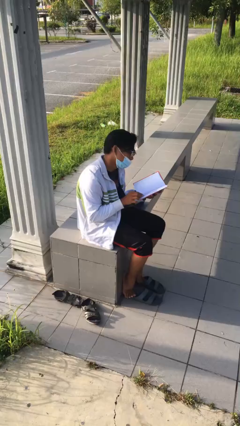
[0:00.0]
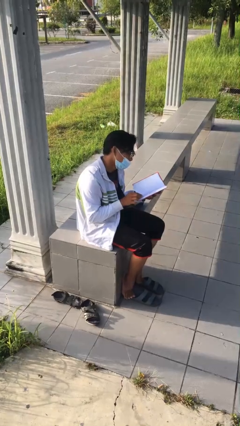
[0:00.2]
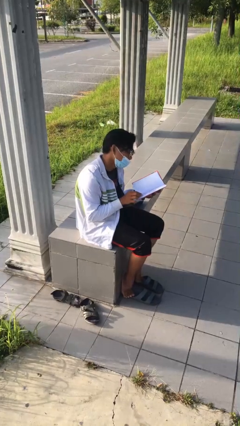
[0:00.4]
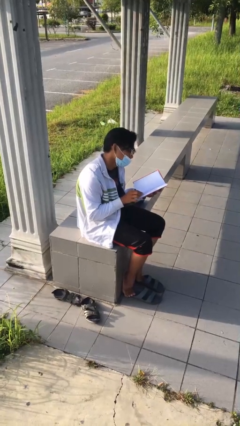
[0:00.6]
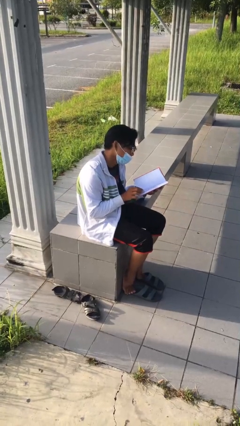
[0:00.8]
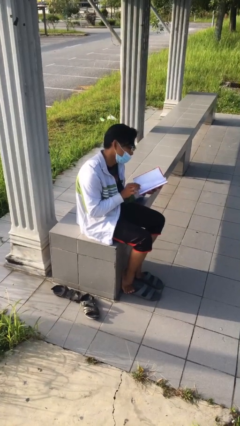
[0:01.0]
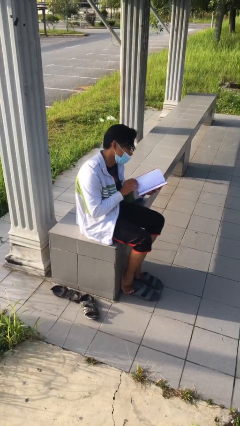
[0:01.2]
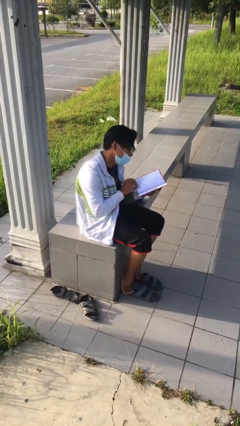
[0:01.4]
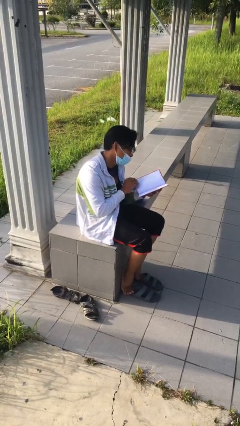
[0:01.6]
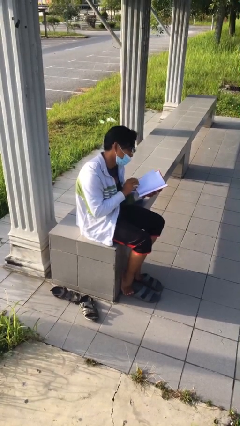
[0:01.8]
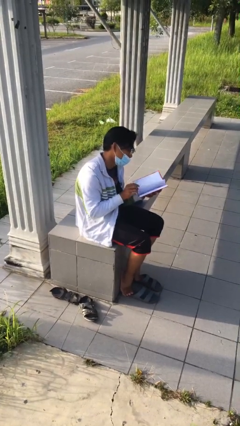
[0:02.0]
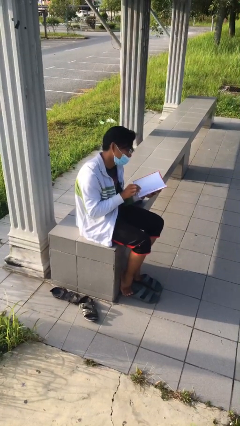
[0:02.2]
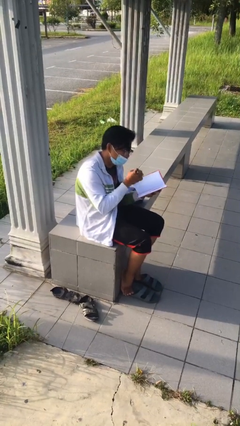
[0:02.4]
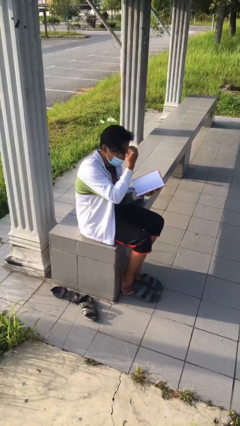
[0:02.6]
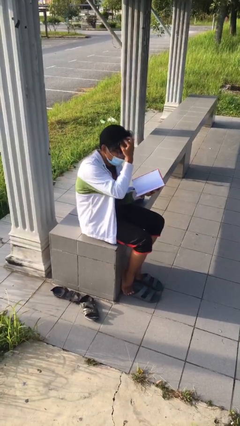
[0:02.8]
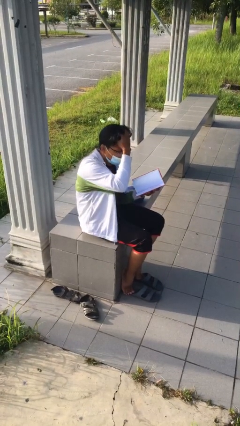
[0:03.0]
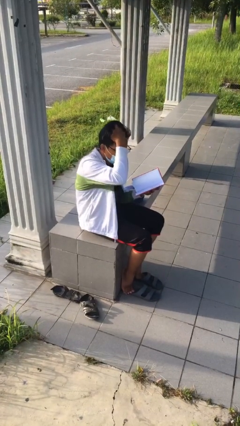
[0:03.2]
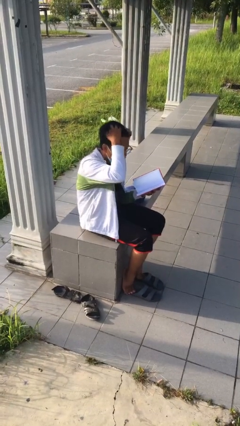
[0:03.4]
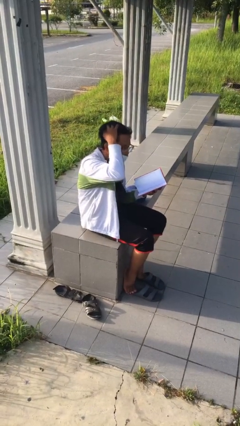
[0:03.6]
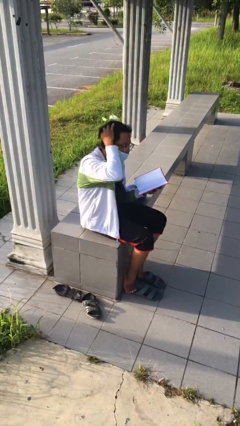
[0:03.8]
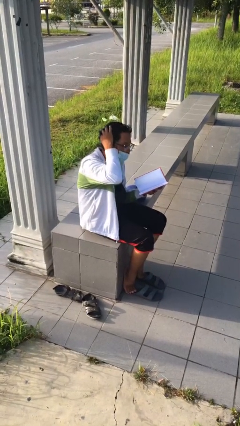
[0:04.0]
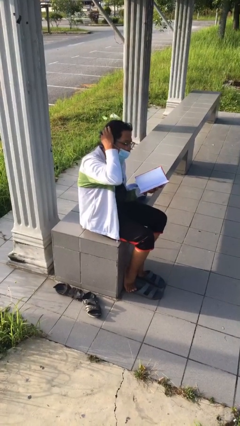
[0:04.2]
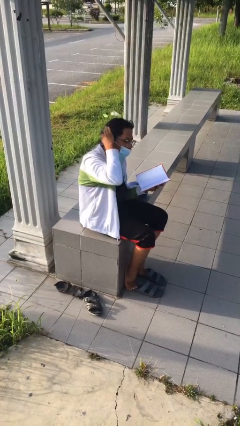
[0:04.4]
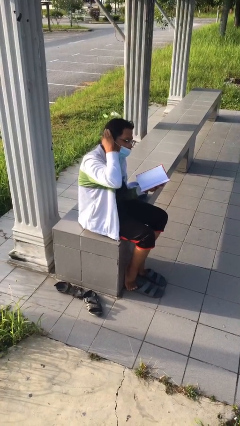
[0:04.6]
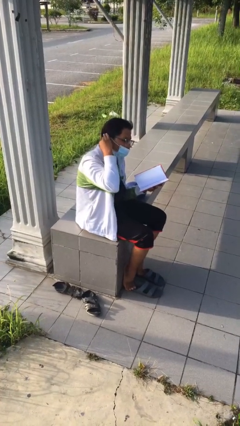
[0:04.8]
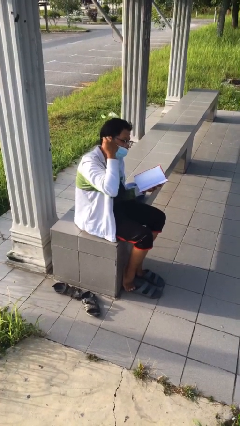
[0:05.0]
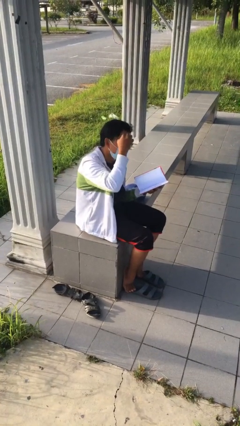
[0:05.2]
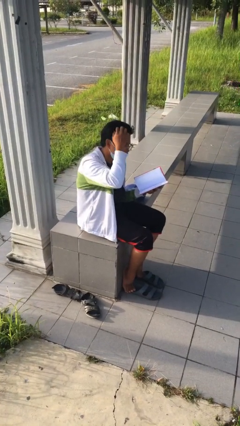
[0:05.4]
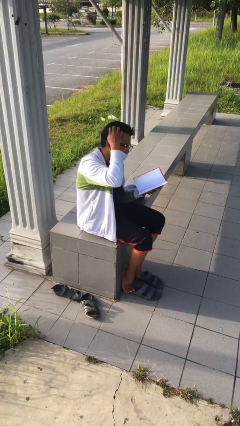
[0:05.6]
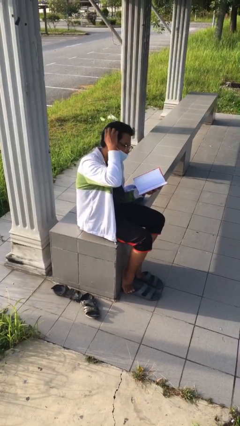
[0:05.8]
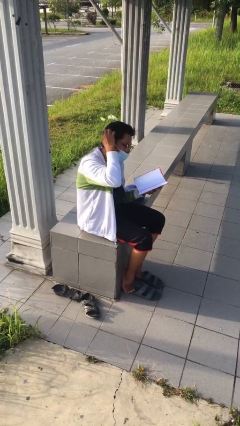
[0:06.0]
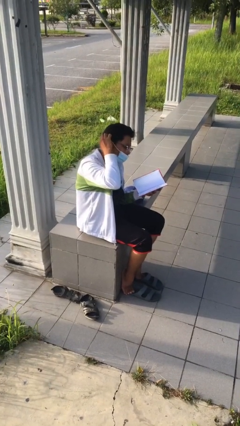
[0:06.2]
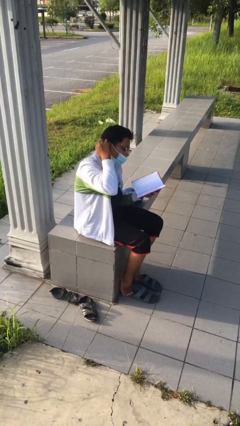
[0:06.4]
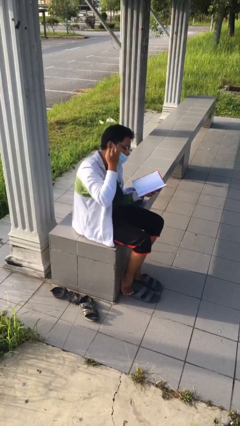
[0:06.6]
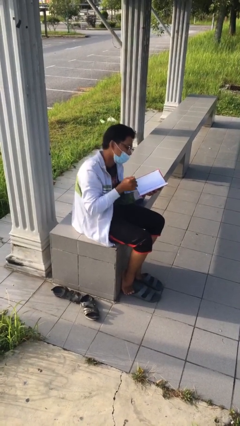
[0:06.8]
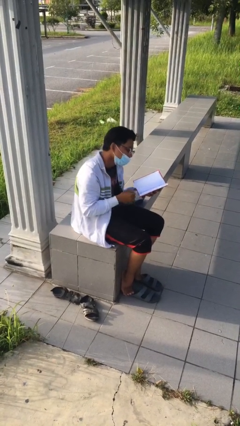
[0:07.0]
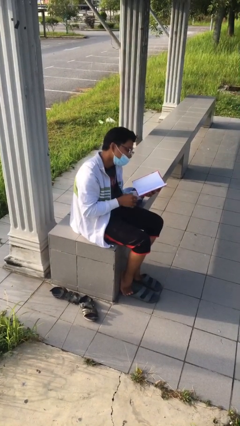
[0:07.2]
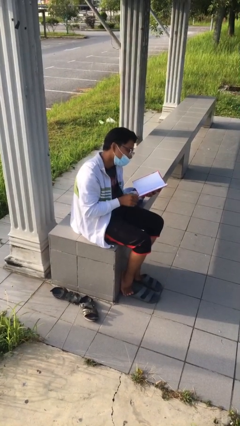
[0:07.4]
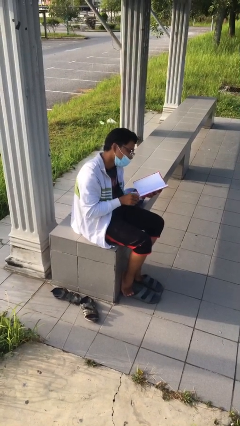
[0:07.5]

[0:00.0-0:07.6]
person reads document

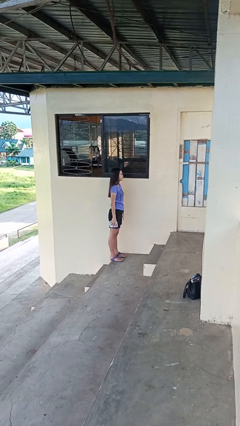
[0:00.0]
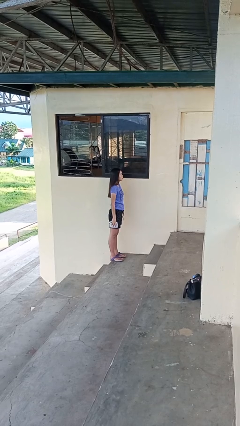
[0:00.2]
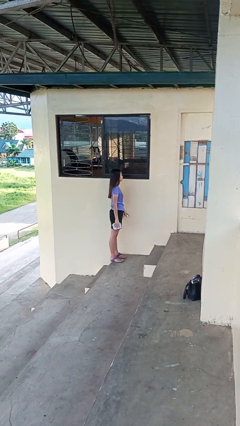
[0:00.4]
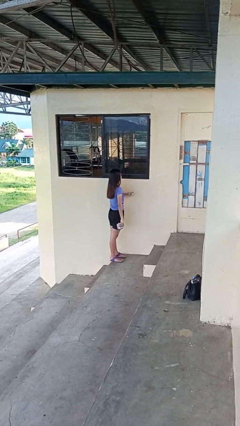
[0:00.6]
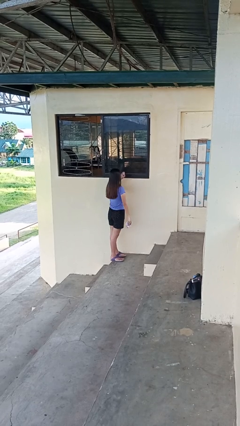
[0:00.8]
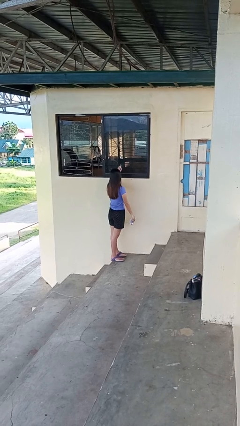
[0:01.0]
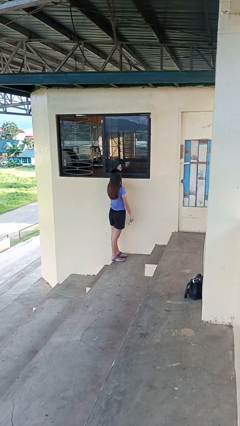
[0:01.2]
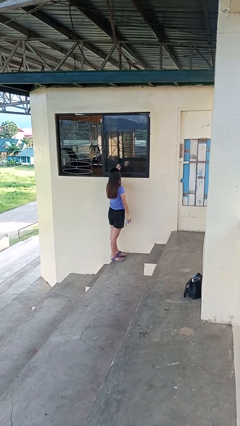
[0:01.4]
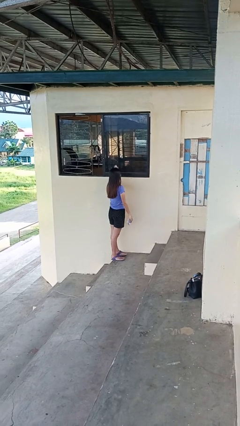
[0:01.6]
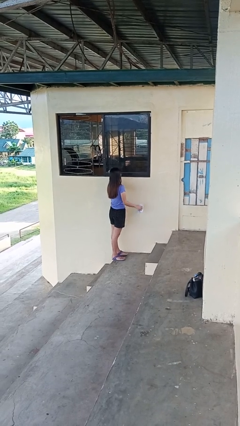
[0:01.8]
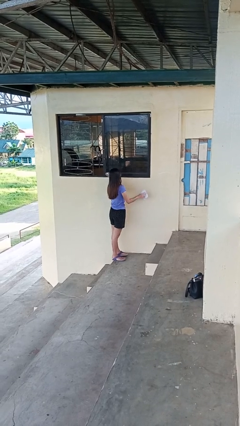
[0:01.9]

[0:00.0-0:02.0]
person sprays from bottle

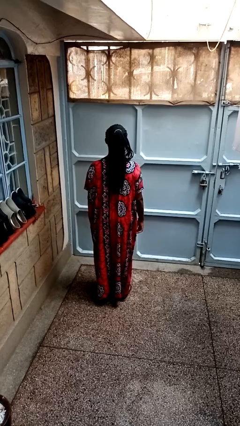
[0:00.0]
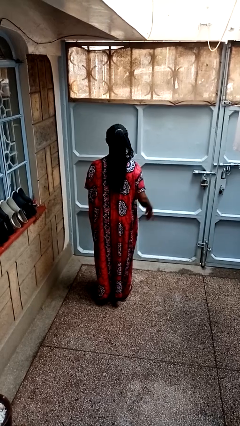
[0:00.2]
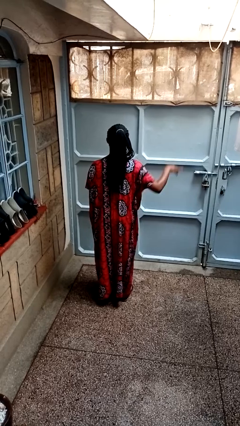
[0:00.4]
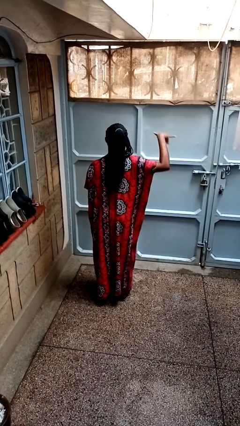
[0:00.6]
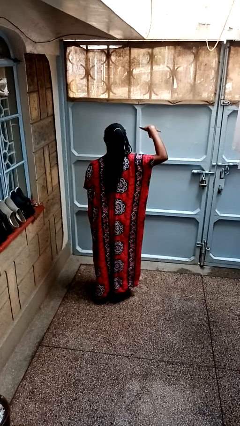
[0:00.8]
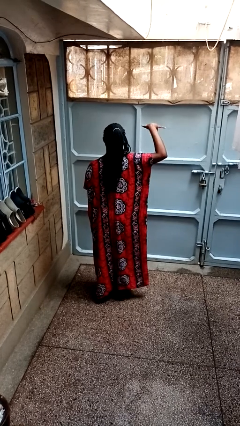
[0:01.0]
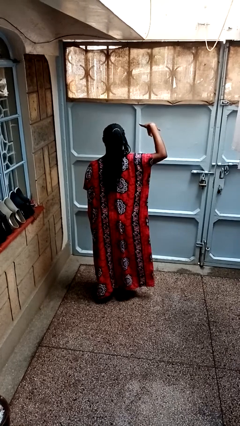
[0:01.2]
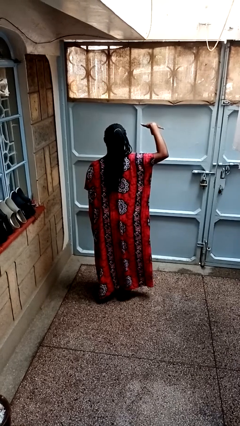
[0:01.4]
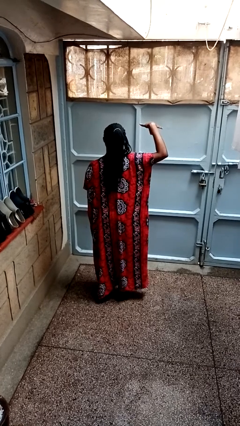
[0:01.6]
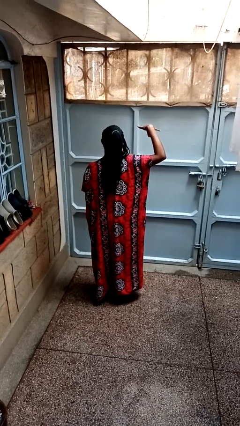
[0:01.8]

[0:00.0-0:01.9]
person gestures hang loose

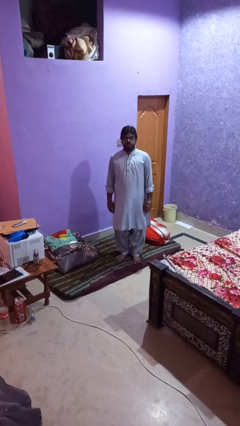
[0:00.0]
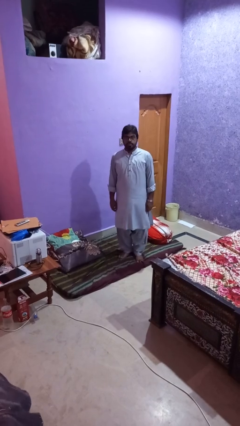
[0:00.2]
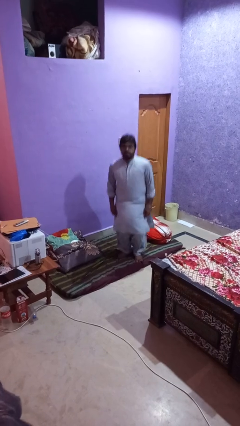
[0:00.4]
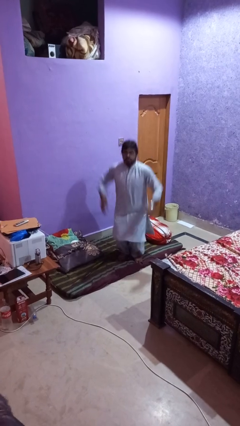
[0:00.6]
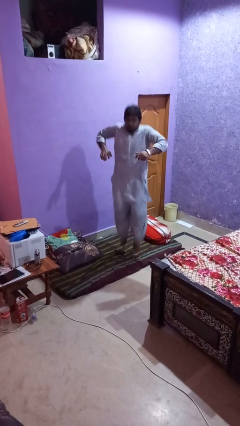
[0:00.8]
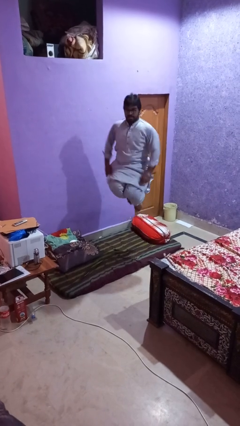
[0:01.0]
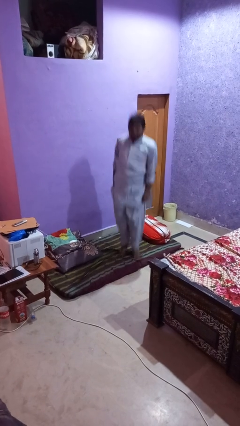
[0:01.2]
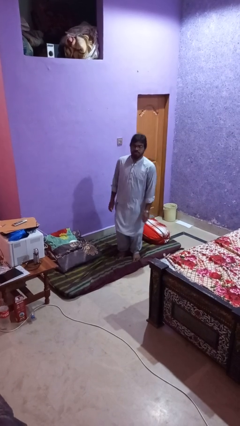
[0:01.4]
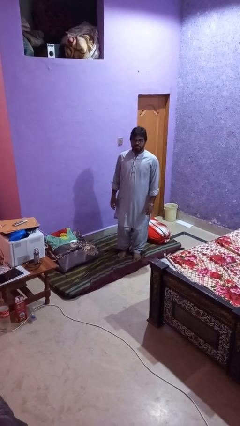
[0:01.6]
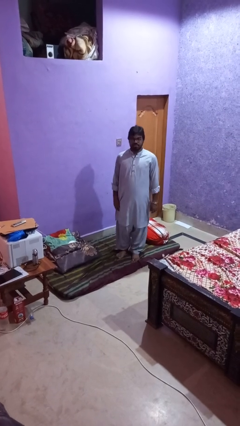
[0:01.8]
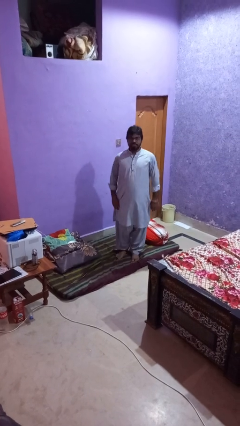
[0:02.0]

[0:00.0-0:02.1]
person jumps

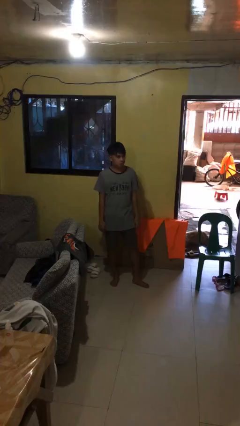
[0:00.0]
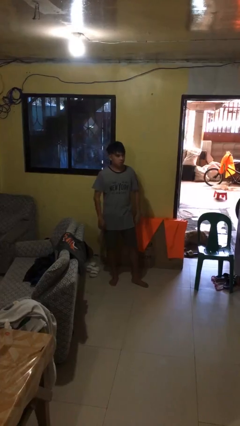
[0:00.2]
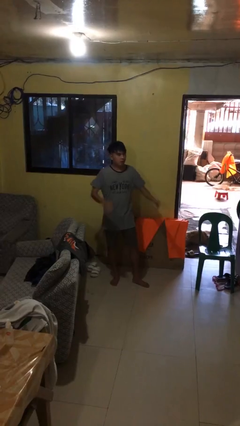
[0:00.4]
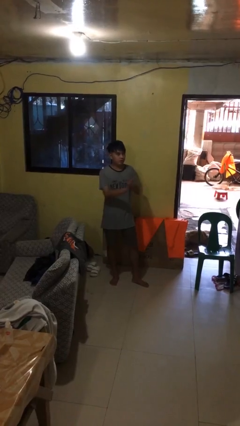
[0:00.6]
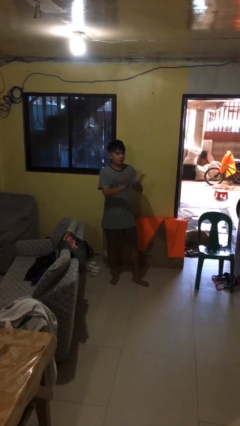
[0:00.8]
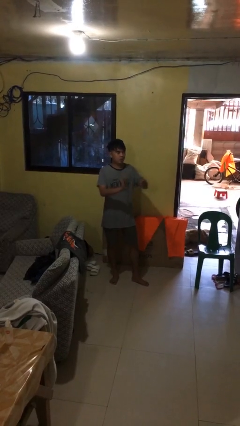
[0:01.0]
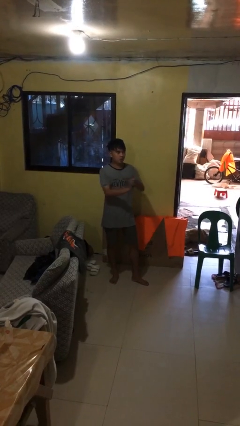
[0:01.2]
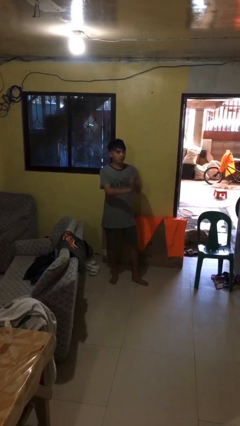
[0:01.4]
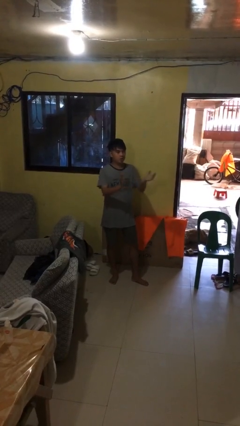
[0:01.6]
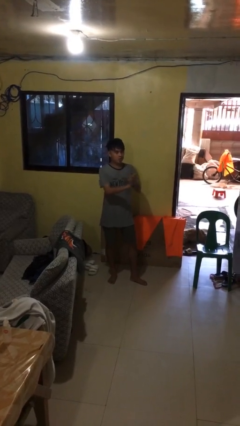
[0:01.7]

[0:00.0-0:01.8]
person claps hands

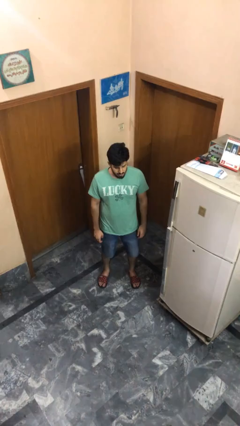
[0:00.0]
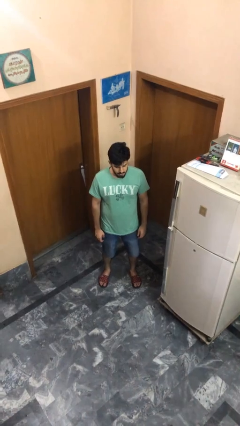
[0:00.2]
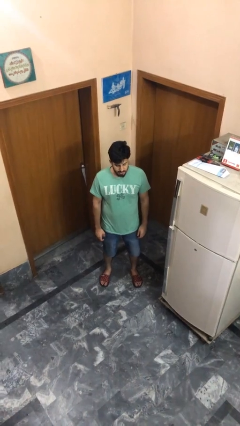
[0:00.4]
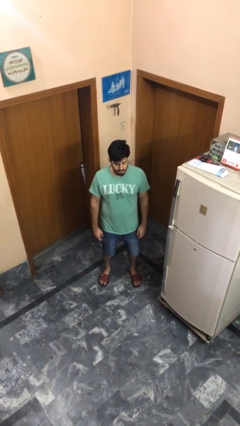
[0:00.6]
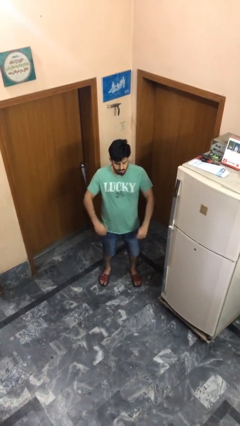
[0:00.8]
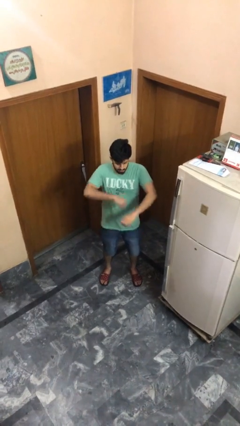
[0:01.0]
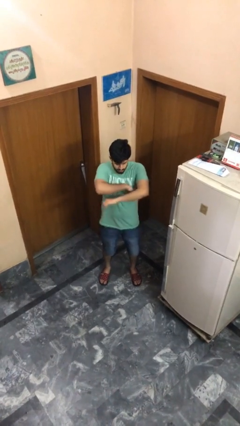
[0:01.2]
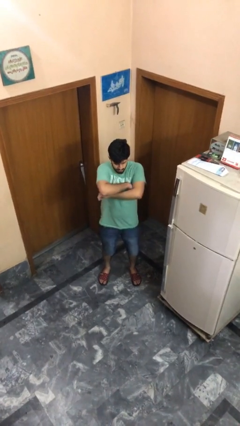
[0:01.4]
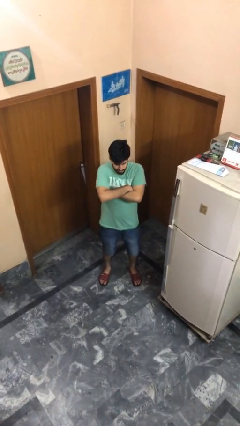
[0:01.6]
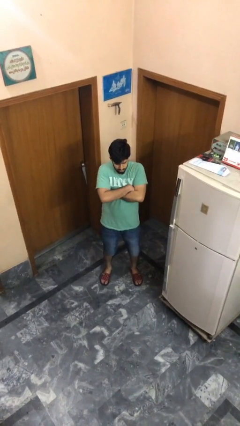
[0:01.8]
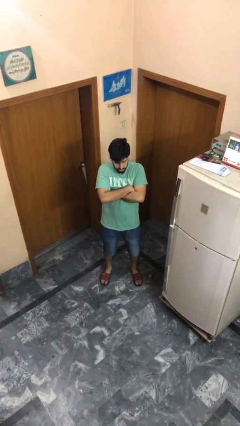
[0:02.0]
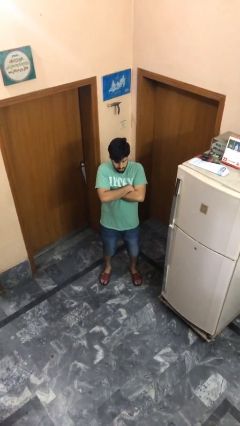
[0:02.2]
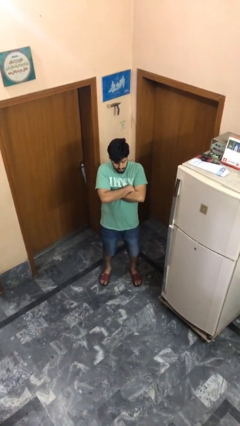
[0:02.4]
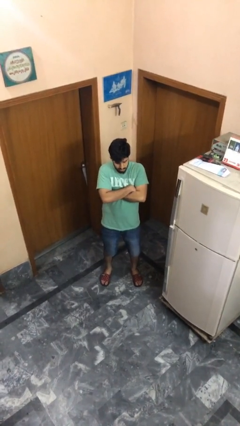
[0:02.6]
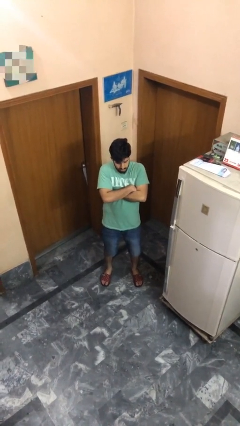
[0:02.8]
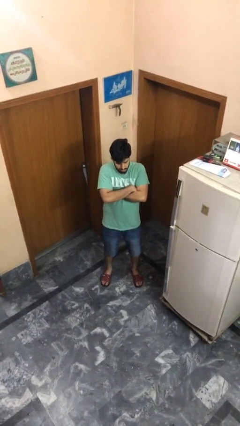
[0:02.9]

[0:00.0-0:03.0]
person crosses arms
